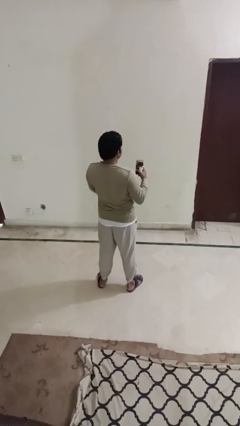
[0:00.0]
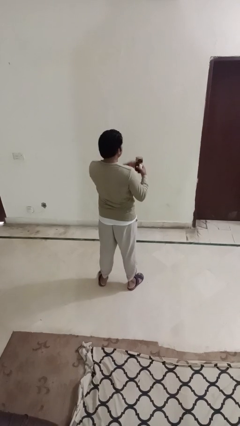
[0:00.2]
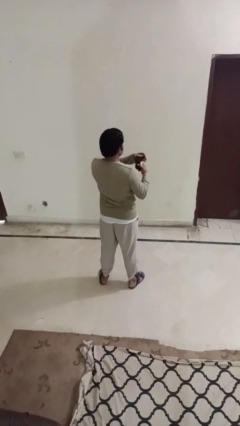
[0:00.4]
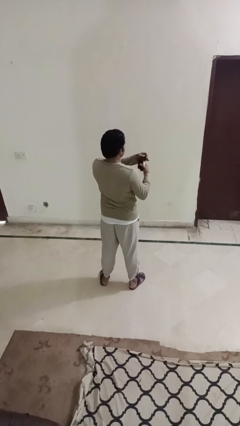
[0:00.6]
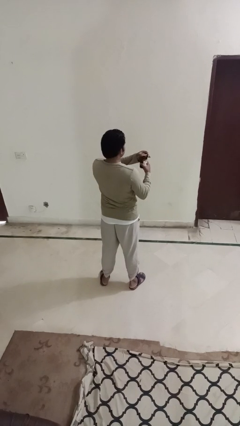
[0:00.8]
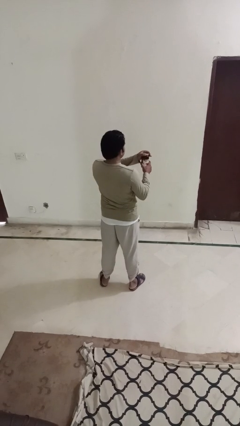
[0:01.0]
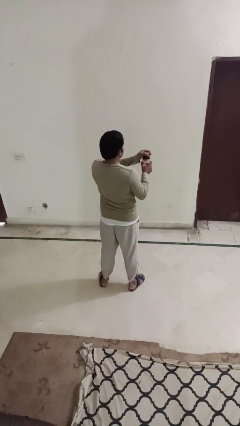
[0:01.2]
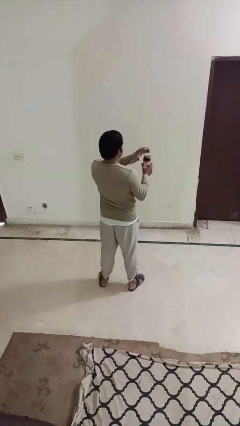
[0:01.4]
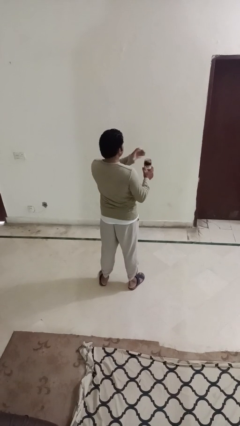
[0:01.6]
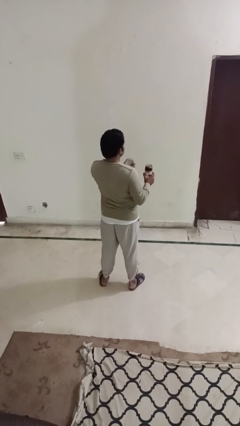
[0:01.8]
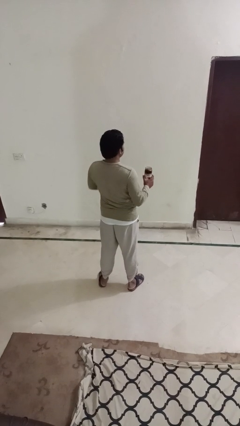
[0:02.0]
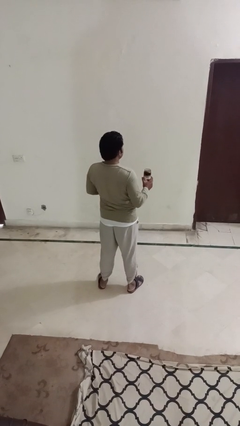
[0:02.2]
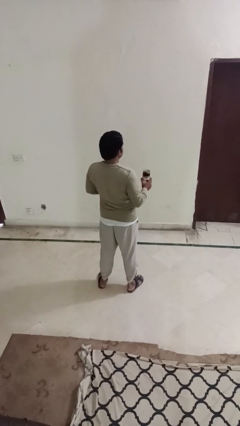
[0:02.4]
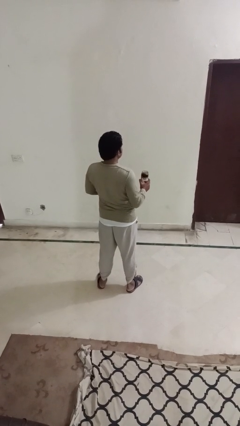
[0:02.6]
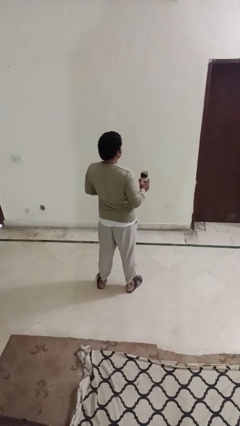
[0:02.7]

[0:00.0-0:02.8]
person opens jar

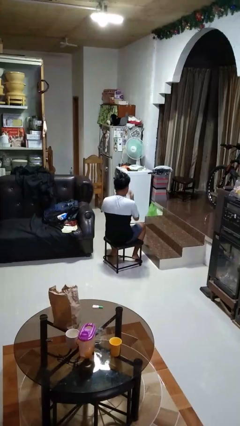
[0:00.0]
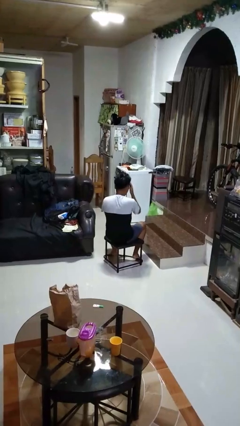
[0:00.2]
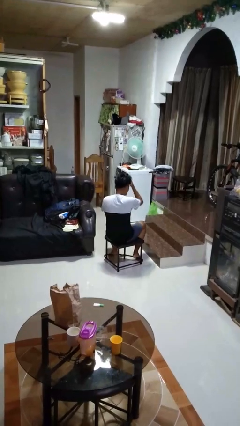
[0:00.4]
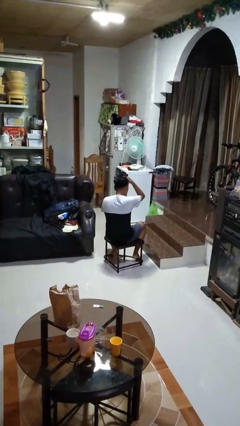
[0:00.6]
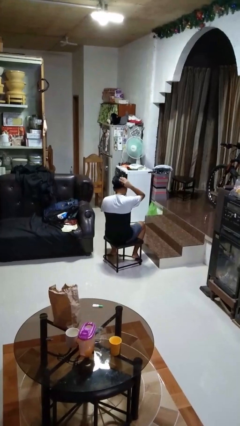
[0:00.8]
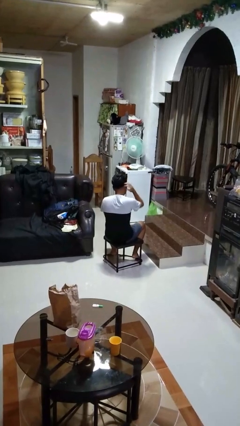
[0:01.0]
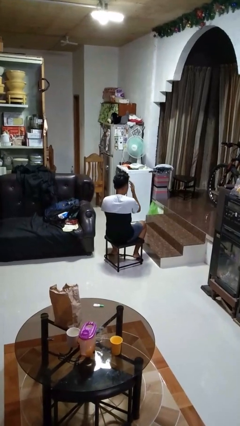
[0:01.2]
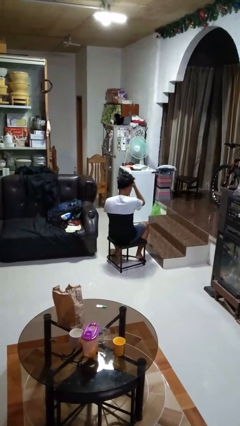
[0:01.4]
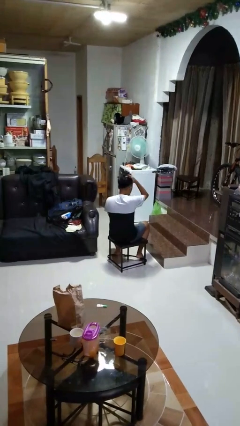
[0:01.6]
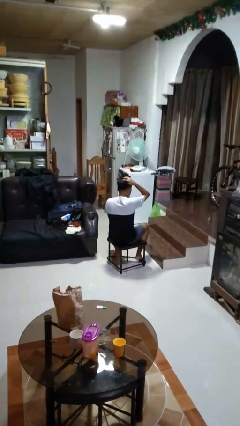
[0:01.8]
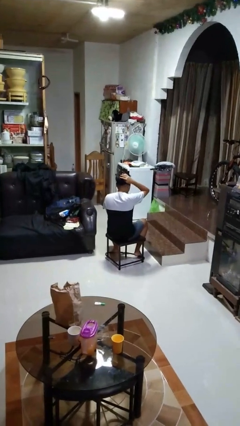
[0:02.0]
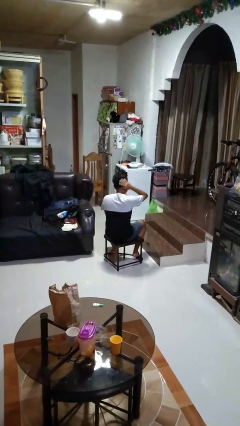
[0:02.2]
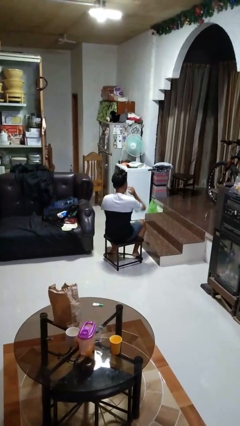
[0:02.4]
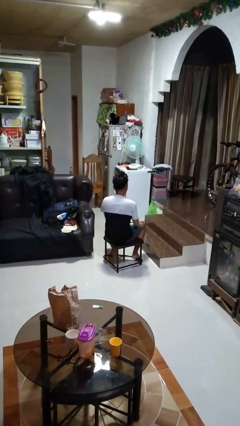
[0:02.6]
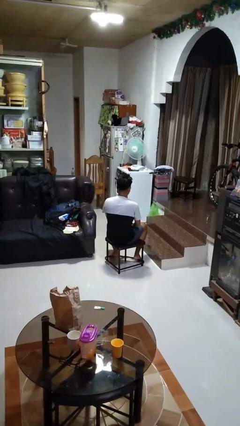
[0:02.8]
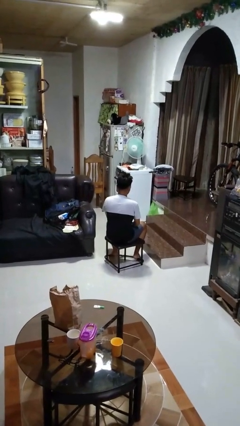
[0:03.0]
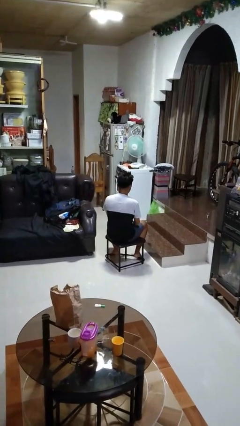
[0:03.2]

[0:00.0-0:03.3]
person strokes hair

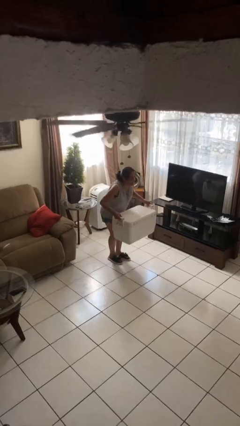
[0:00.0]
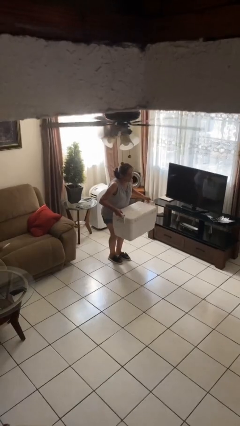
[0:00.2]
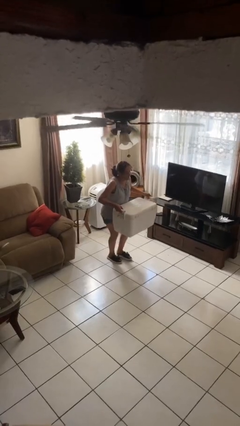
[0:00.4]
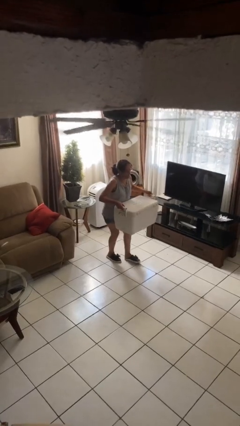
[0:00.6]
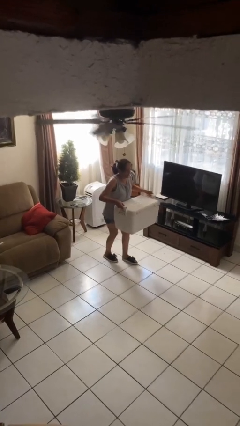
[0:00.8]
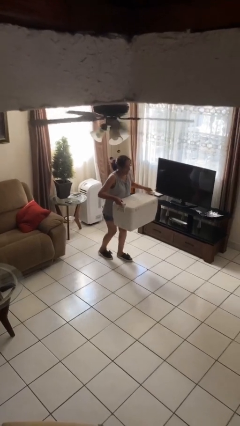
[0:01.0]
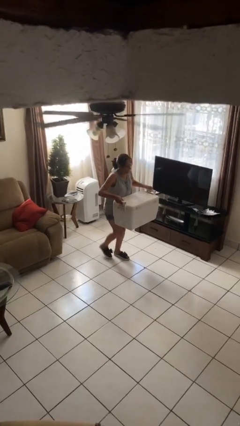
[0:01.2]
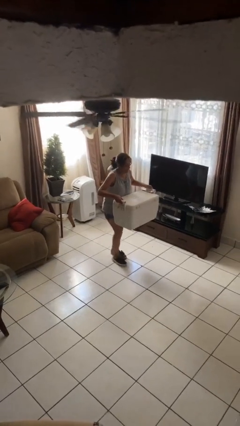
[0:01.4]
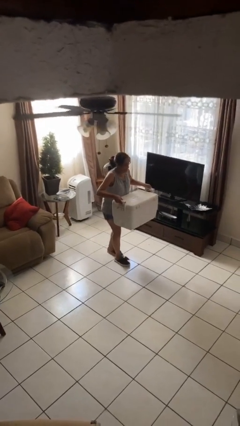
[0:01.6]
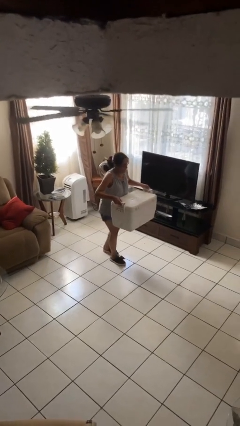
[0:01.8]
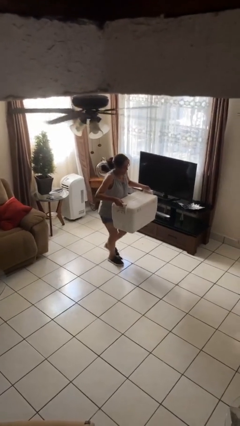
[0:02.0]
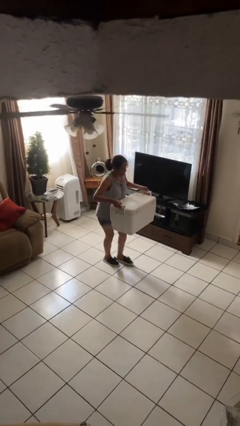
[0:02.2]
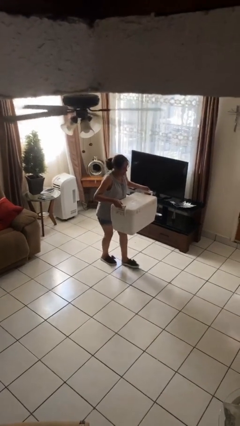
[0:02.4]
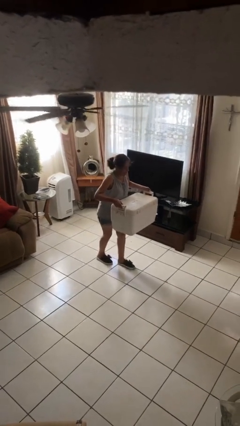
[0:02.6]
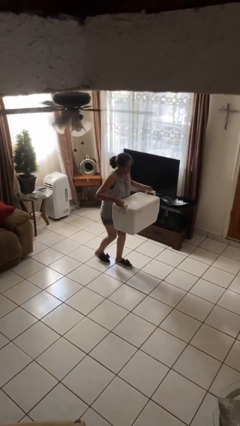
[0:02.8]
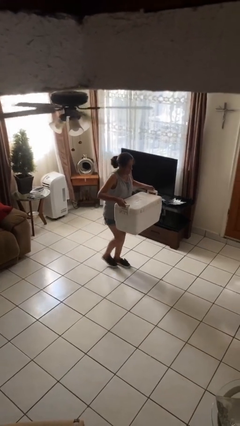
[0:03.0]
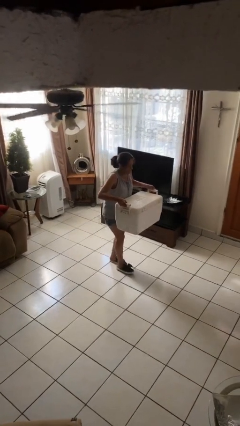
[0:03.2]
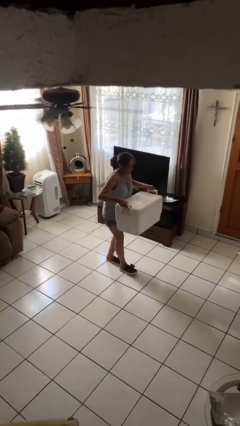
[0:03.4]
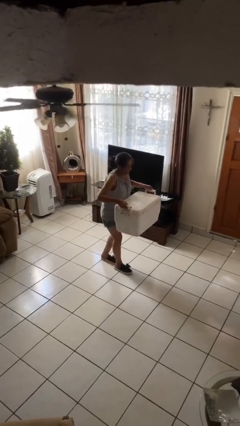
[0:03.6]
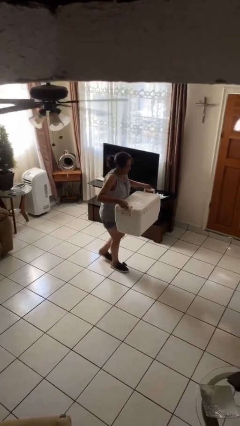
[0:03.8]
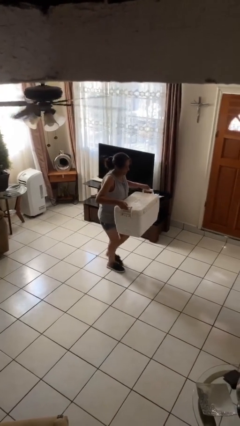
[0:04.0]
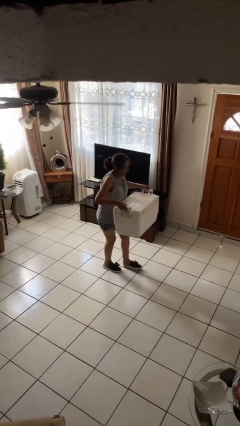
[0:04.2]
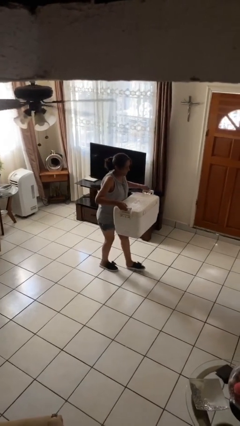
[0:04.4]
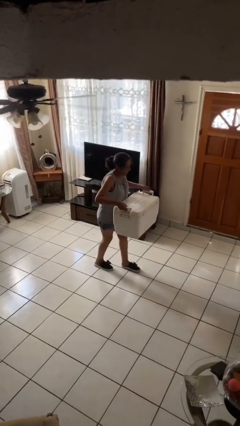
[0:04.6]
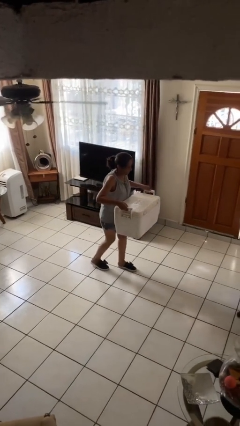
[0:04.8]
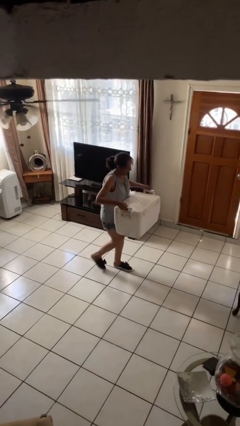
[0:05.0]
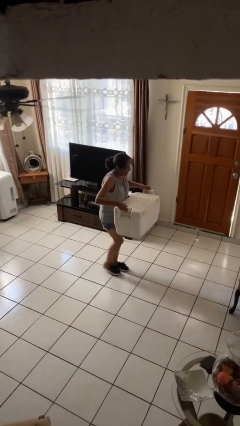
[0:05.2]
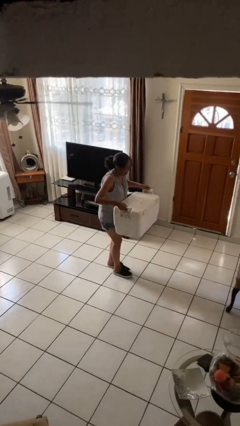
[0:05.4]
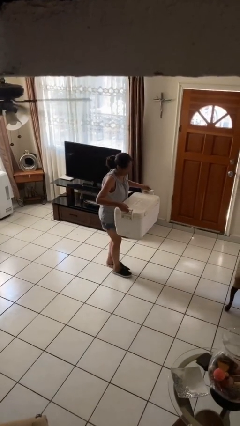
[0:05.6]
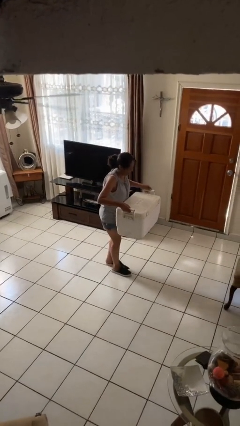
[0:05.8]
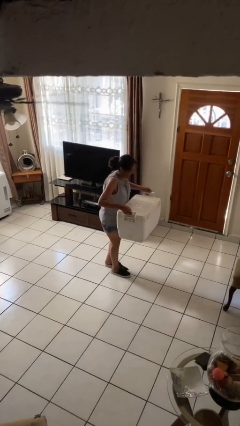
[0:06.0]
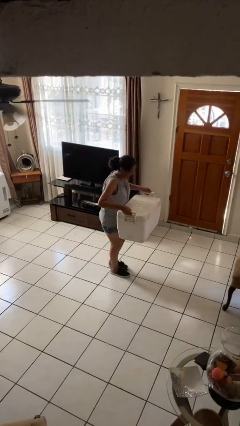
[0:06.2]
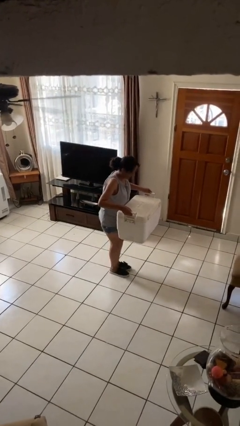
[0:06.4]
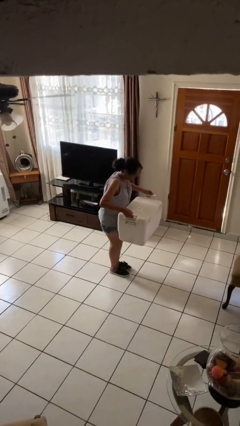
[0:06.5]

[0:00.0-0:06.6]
person carries heavy object

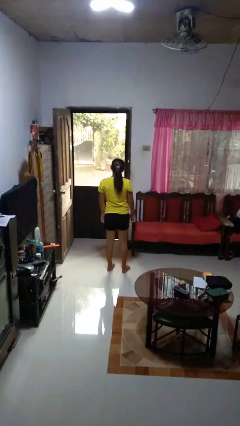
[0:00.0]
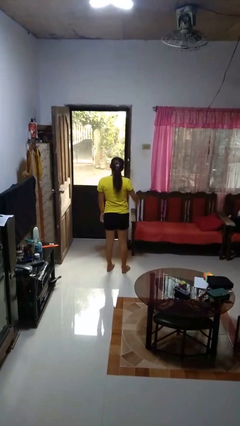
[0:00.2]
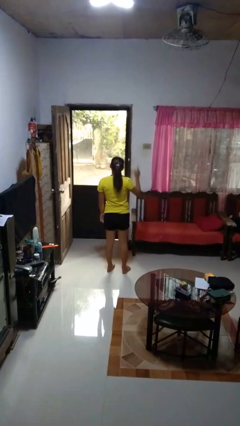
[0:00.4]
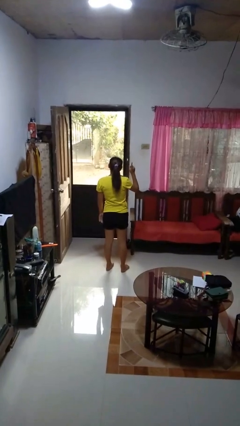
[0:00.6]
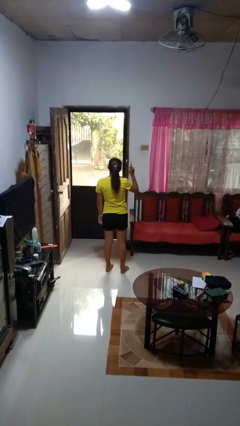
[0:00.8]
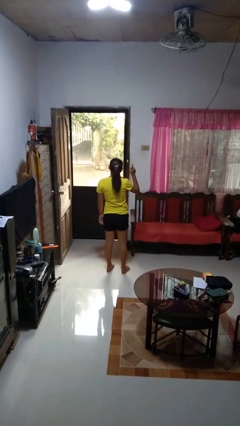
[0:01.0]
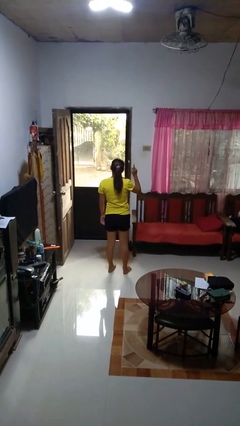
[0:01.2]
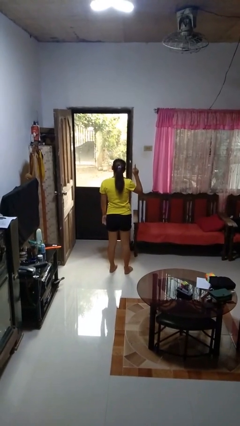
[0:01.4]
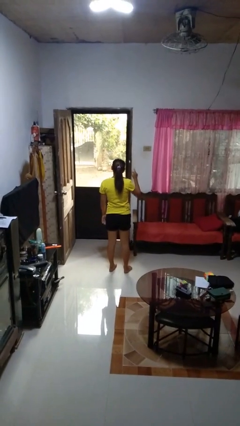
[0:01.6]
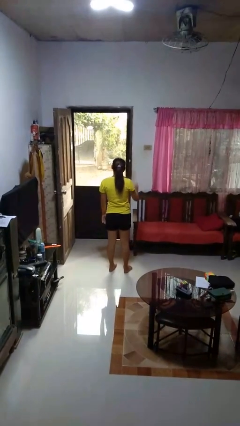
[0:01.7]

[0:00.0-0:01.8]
person gestures number one

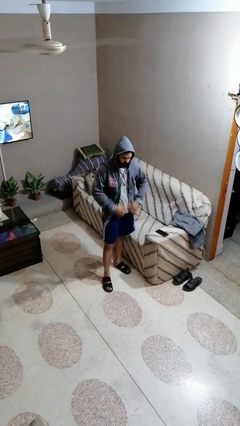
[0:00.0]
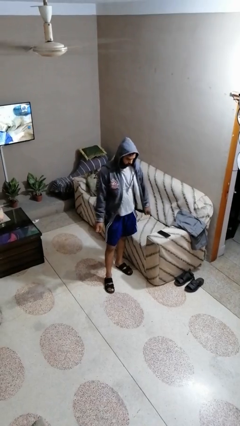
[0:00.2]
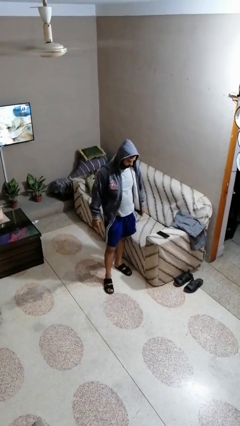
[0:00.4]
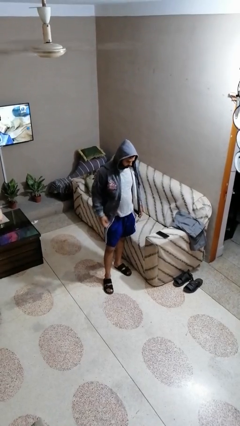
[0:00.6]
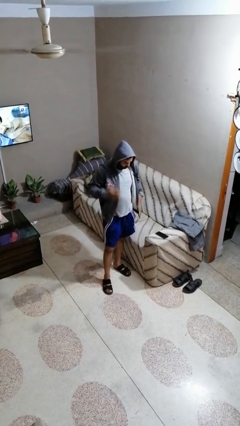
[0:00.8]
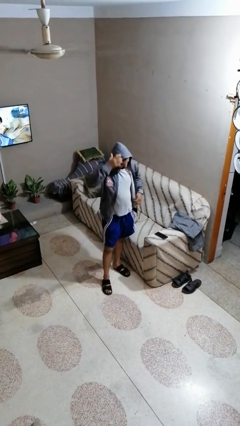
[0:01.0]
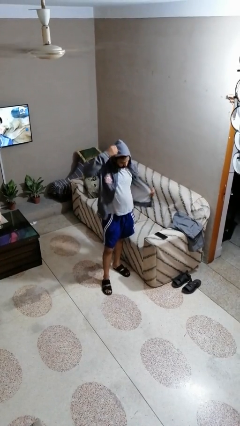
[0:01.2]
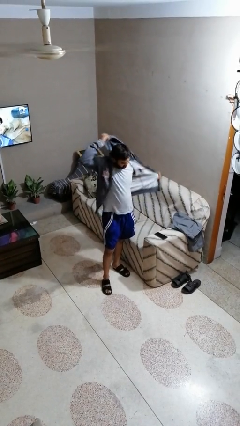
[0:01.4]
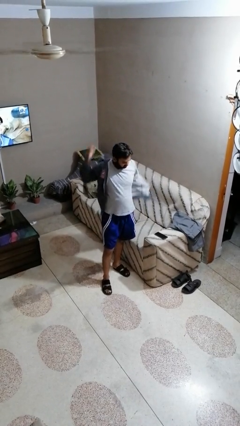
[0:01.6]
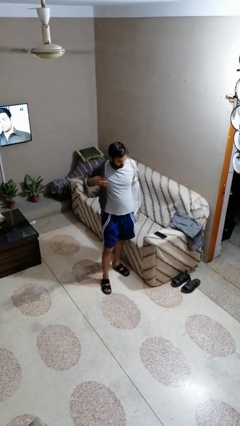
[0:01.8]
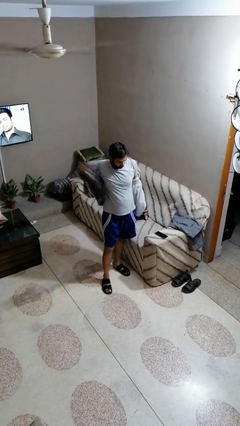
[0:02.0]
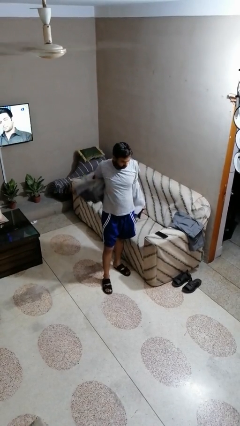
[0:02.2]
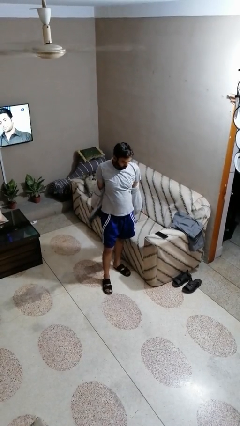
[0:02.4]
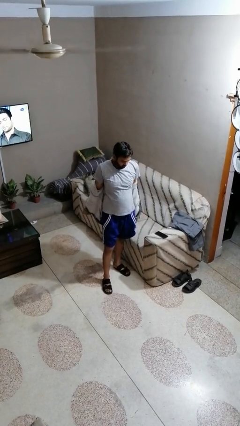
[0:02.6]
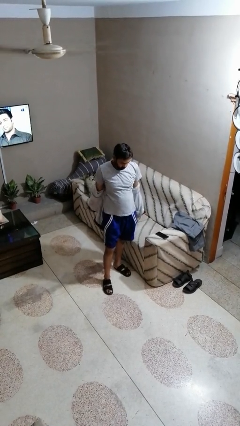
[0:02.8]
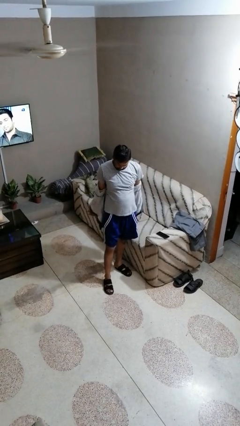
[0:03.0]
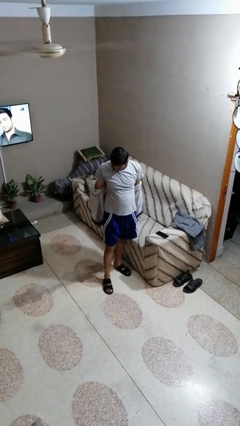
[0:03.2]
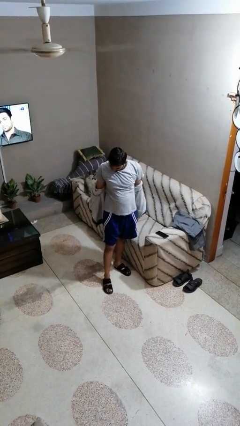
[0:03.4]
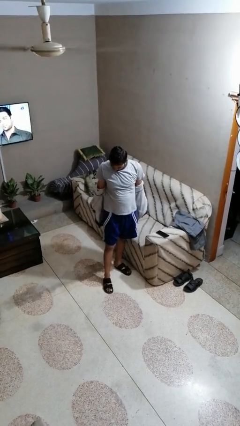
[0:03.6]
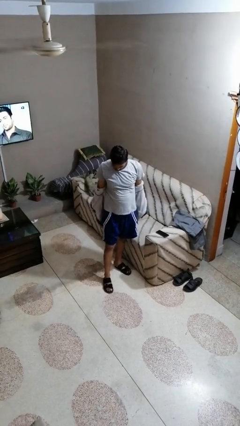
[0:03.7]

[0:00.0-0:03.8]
person takes off hoodie
